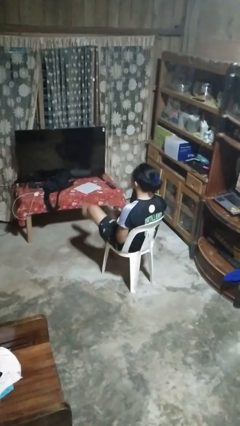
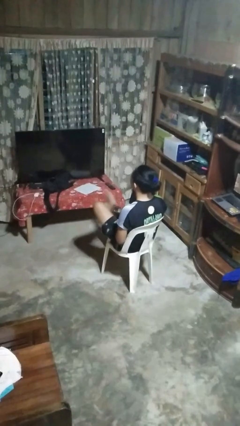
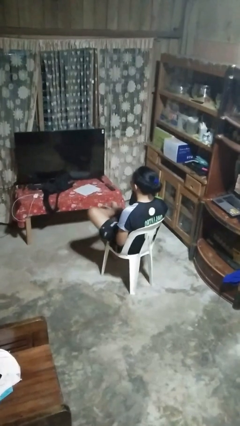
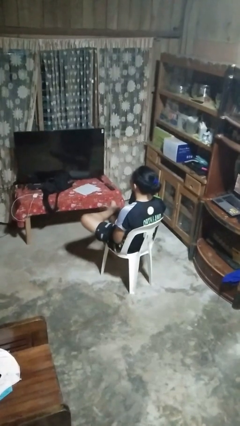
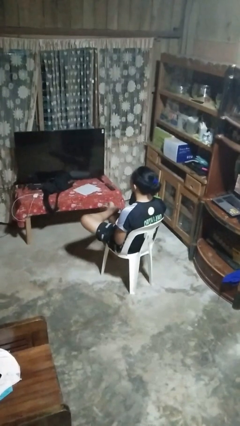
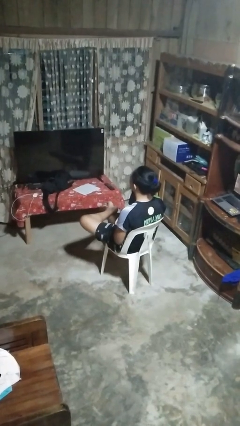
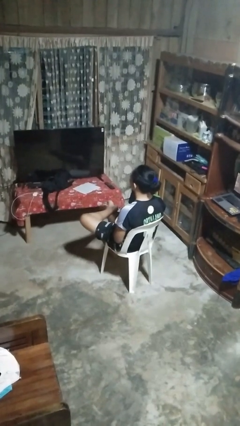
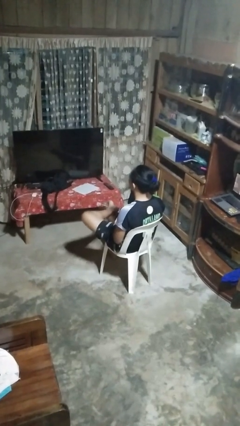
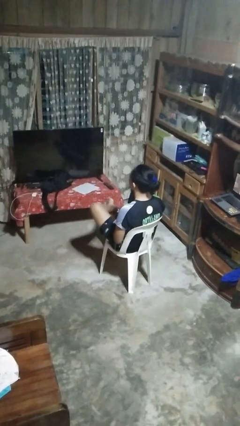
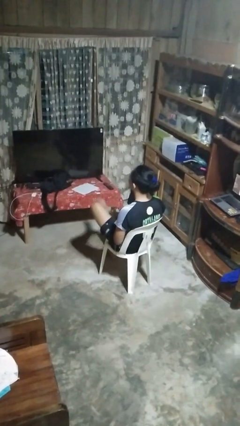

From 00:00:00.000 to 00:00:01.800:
person crosses legs

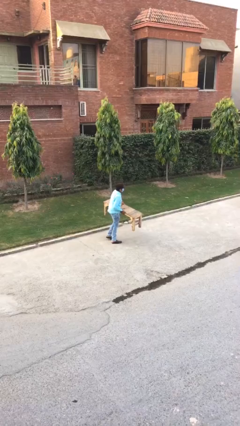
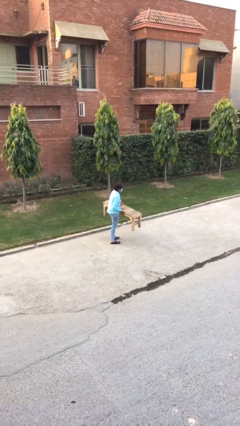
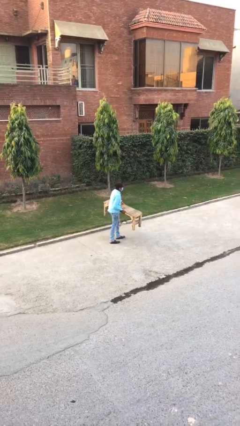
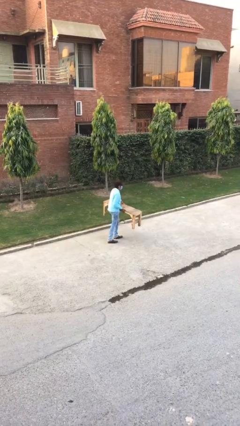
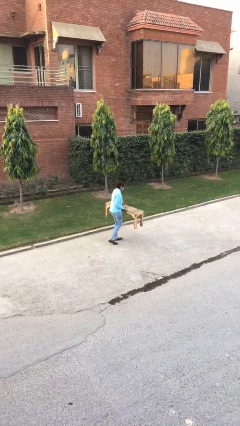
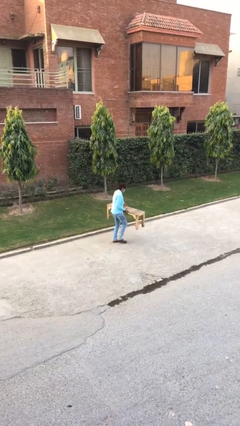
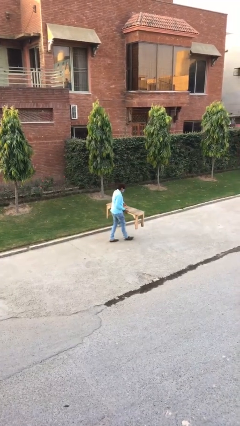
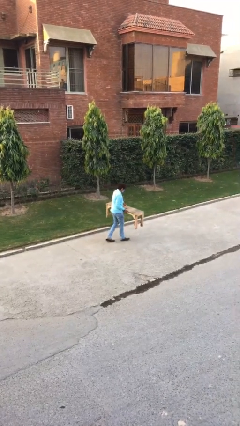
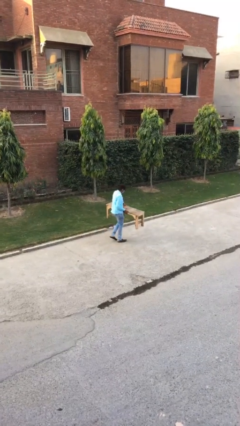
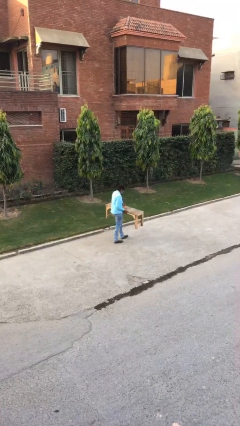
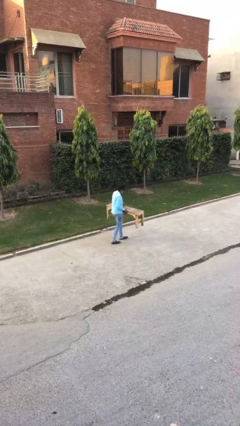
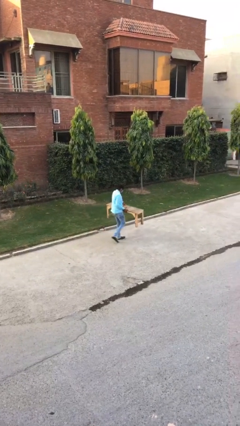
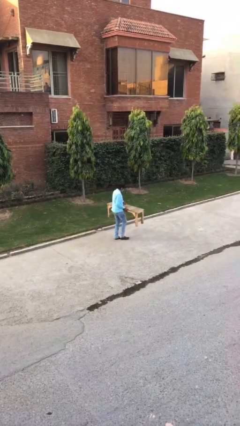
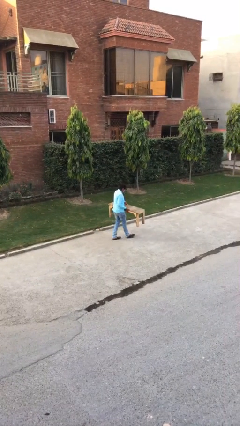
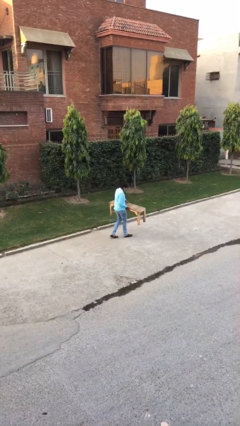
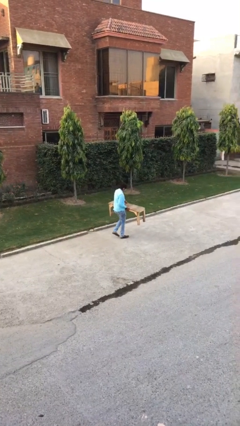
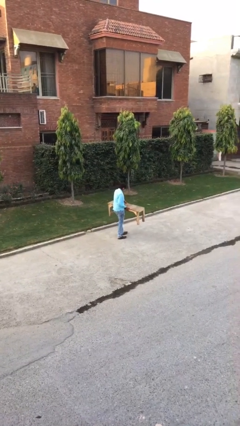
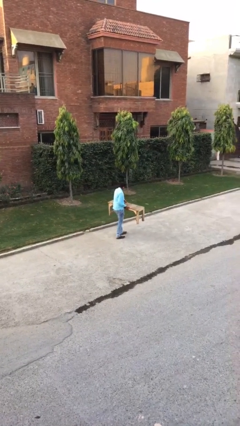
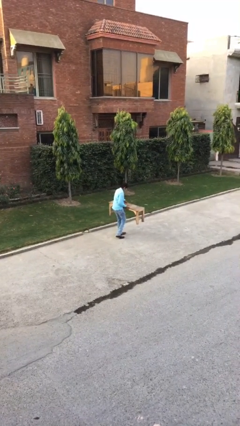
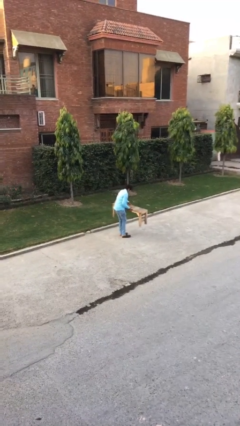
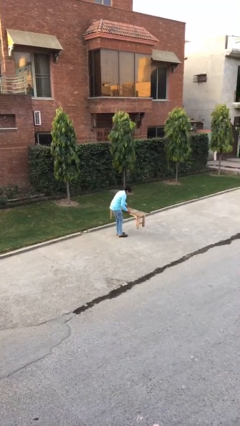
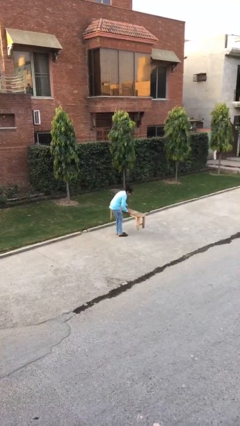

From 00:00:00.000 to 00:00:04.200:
person carries heavy object

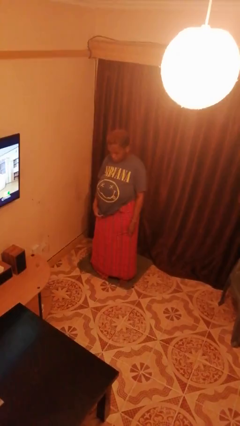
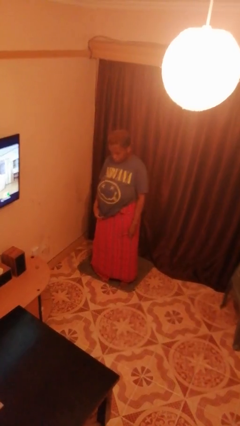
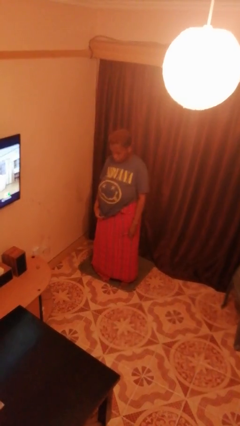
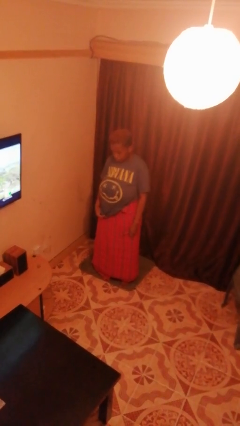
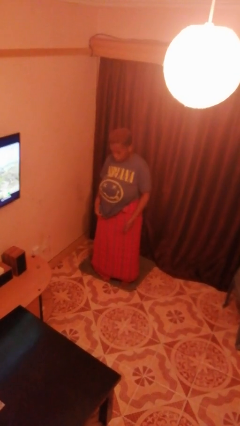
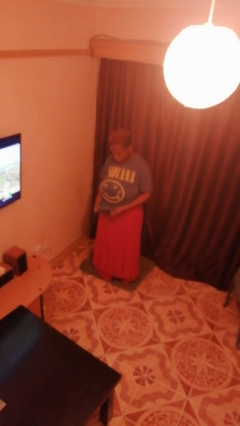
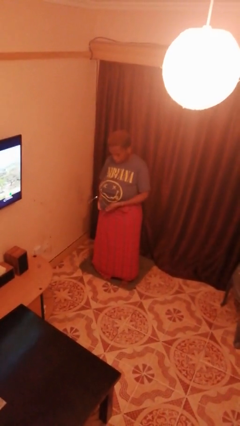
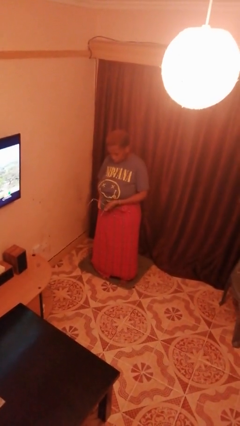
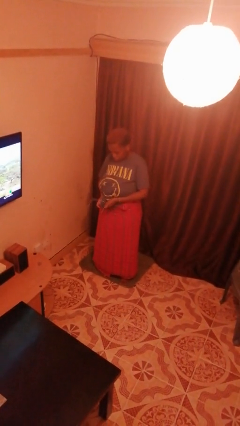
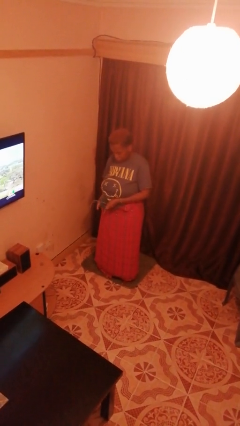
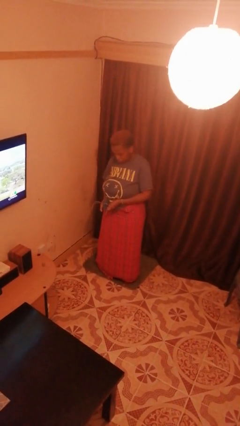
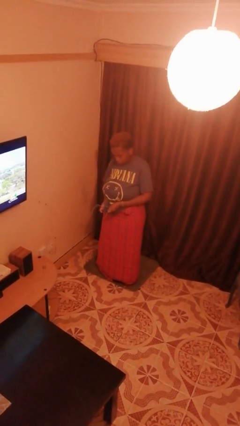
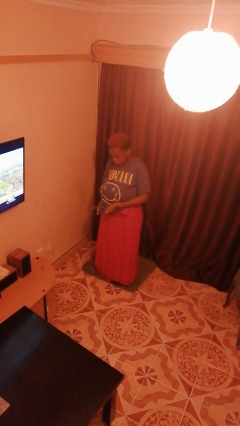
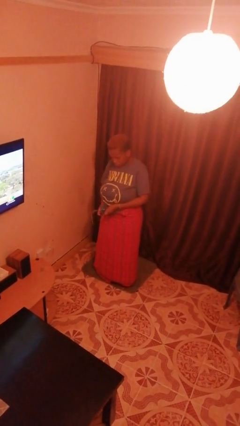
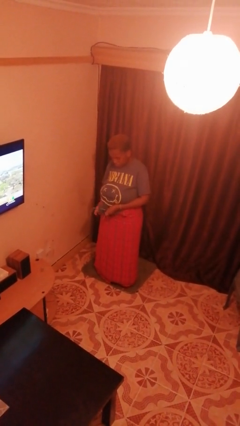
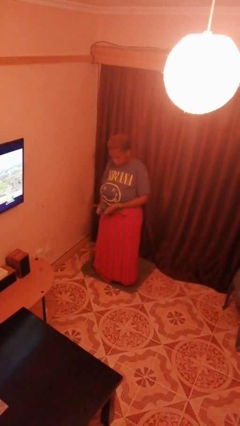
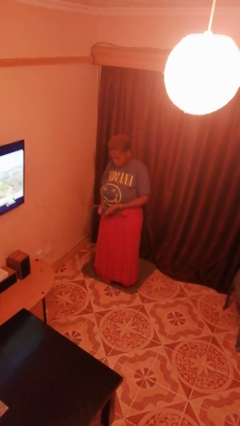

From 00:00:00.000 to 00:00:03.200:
person cleans eyeglasses

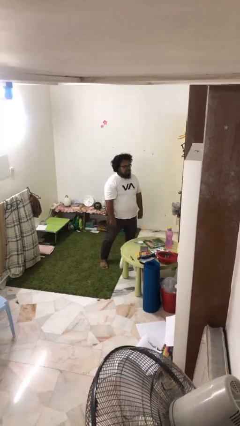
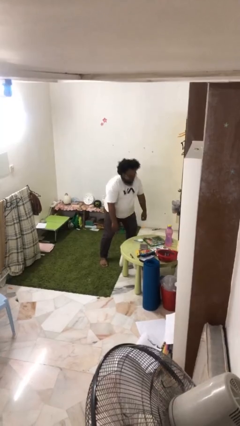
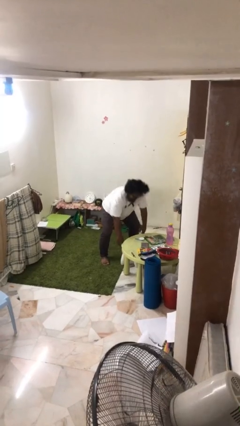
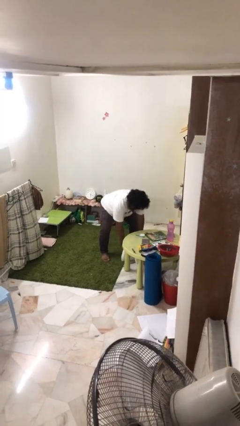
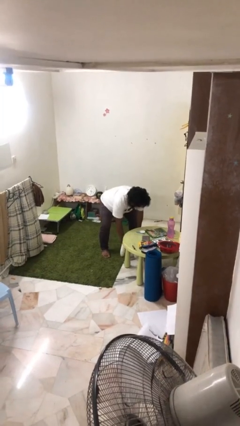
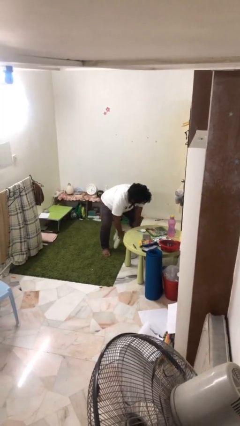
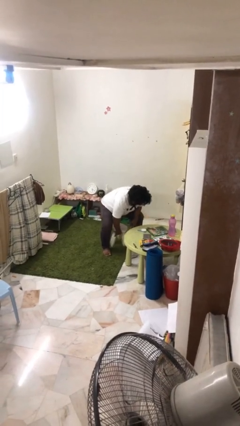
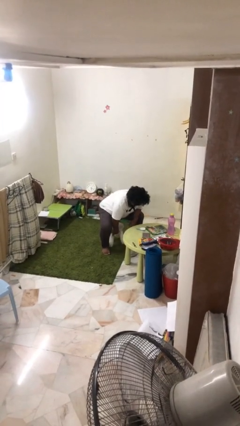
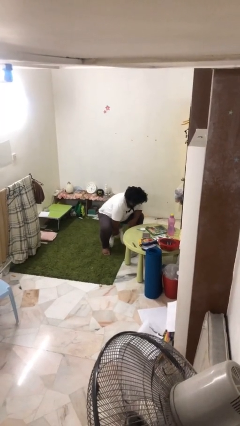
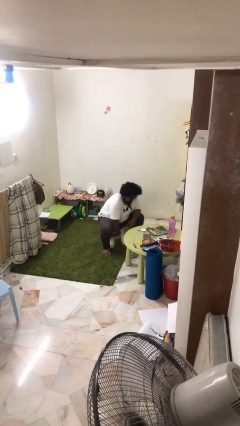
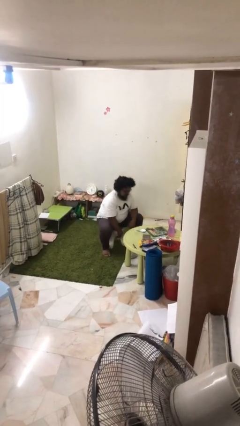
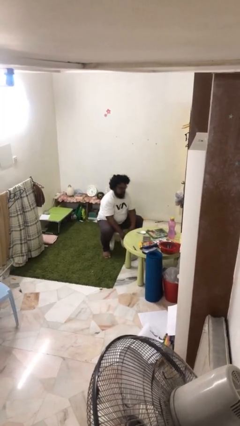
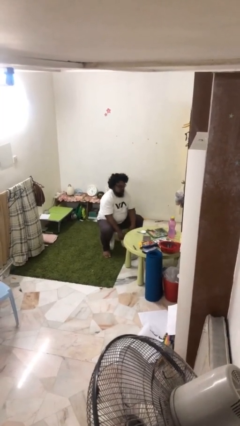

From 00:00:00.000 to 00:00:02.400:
person sits down

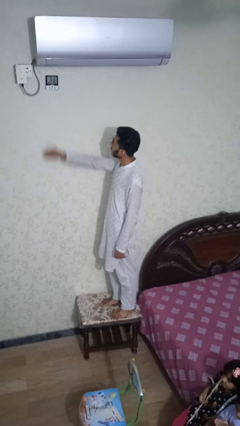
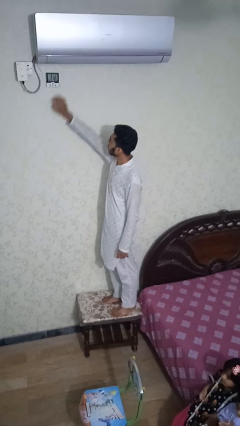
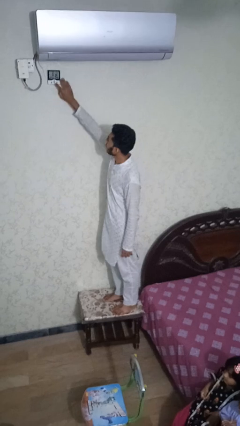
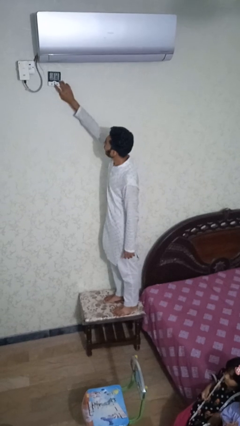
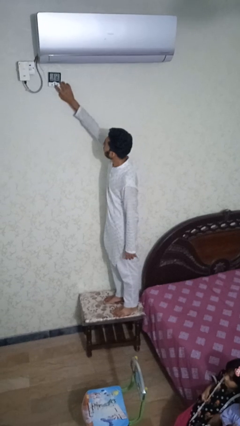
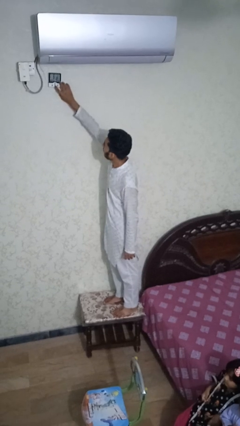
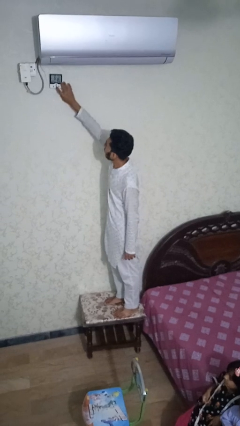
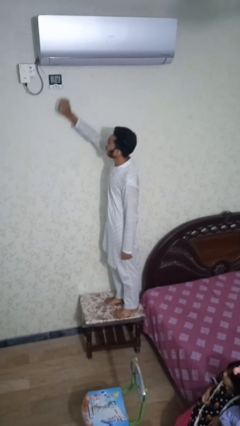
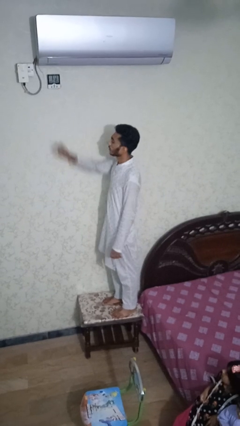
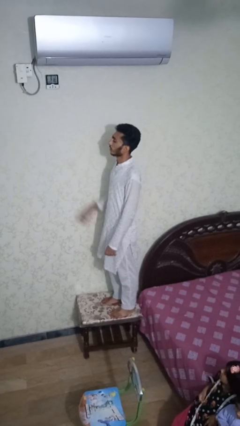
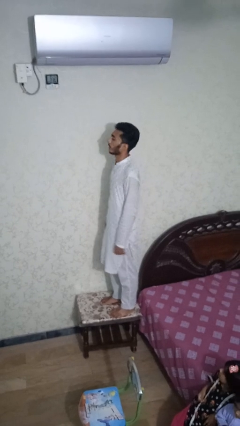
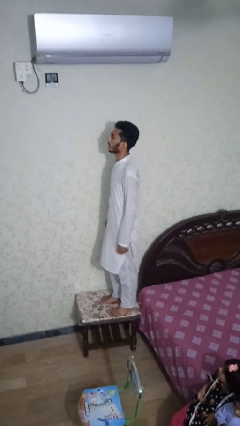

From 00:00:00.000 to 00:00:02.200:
person adjusts thermostat

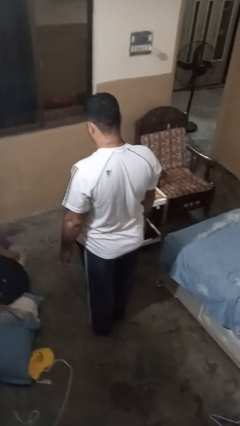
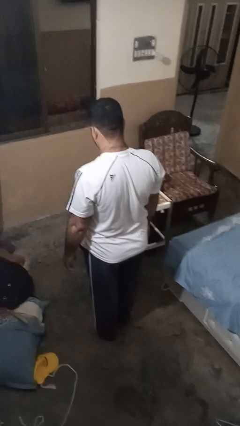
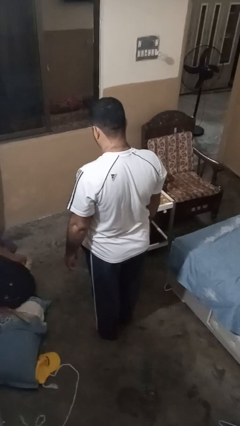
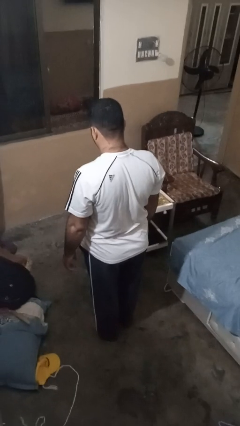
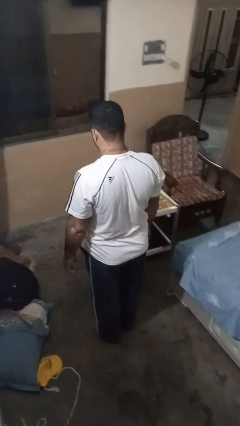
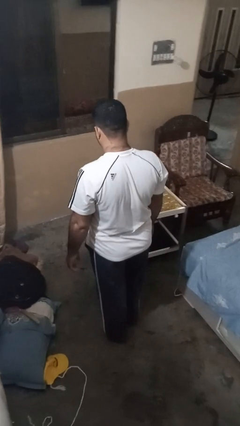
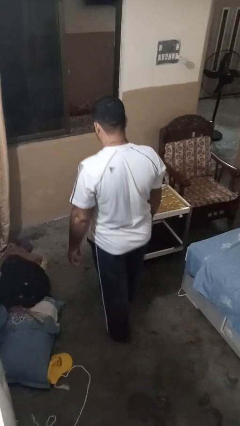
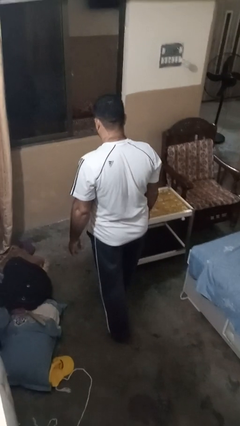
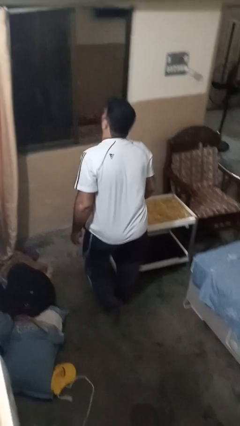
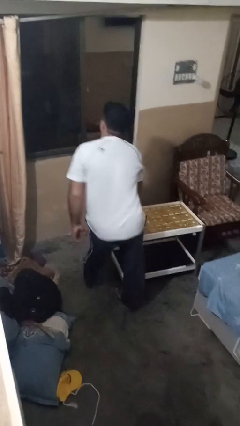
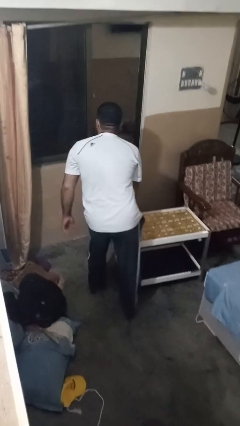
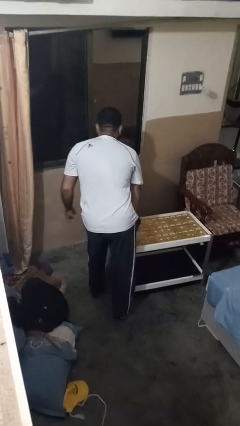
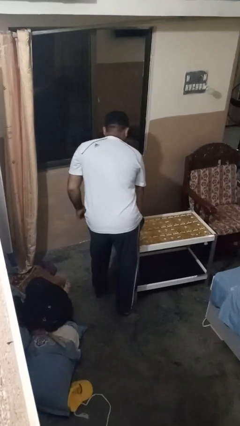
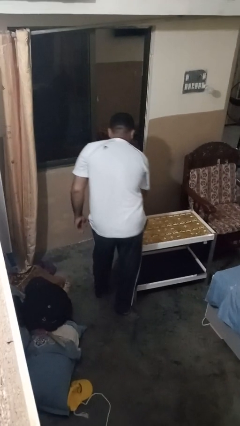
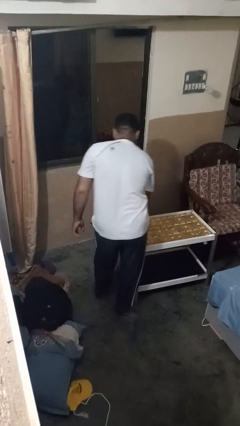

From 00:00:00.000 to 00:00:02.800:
person bumps into table

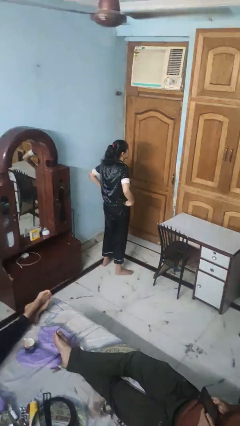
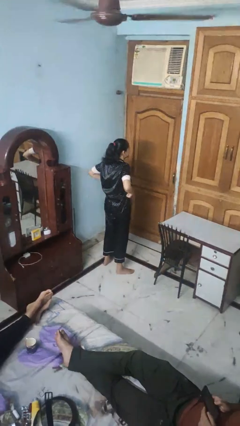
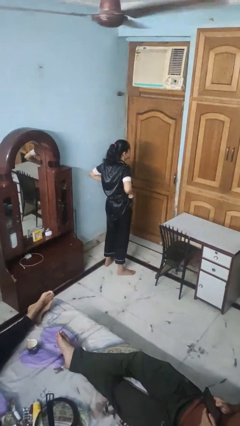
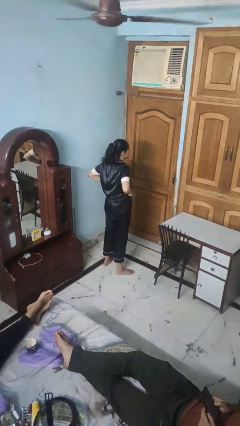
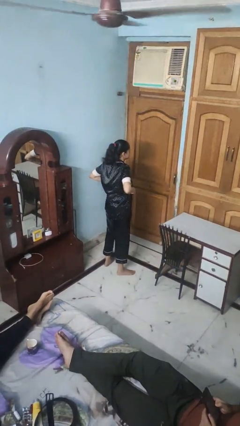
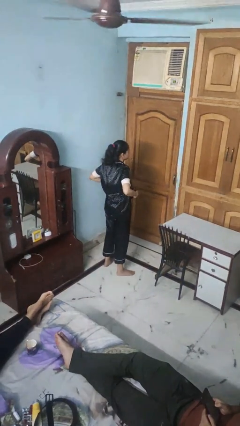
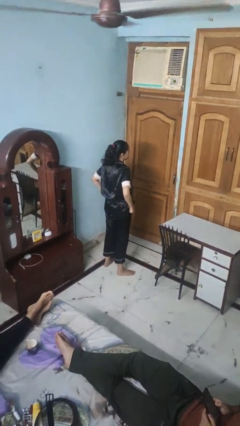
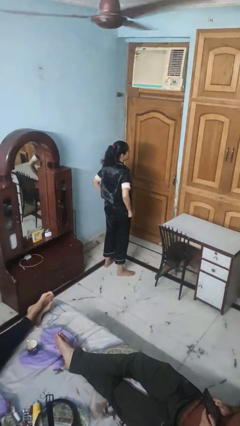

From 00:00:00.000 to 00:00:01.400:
person hikes up pants
